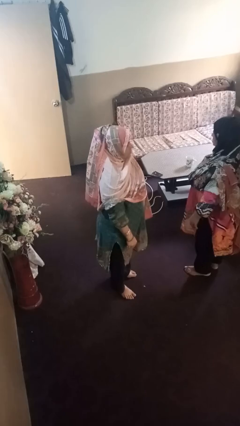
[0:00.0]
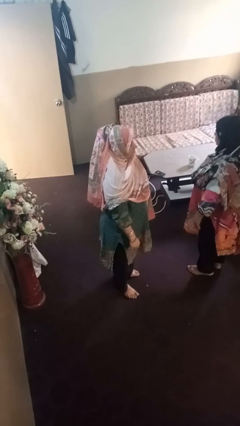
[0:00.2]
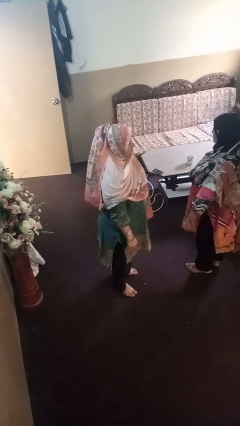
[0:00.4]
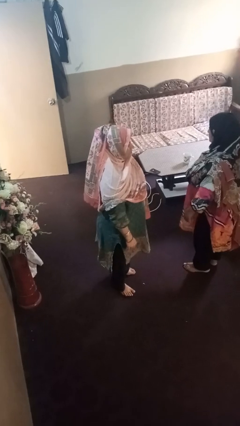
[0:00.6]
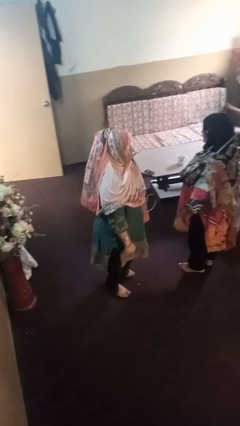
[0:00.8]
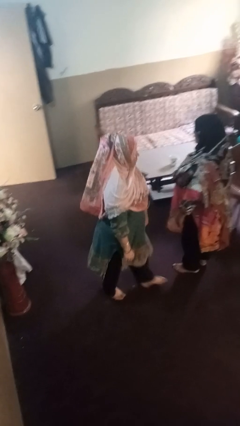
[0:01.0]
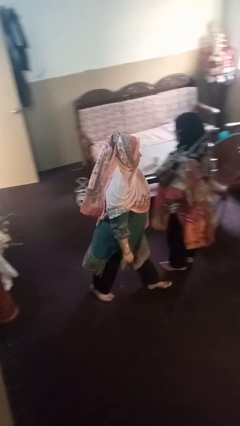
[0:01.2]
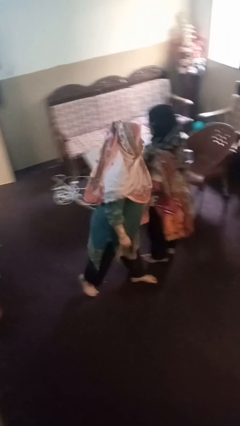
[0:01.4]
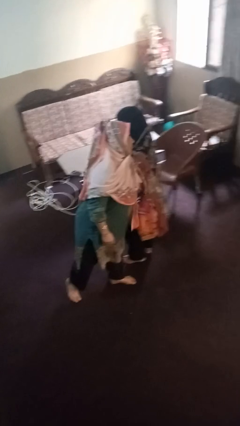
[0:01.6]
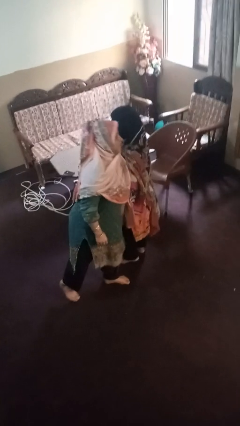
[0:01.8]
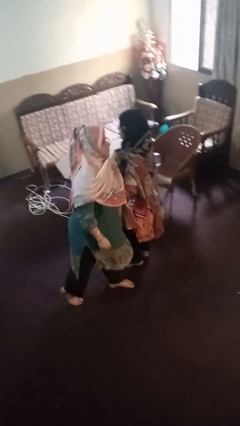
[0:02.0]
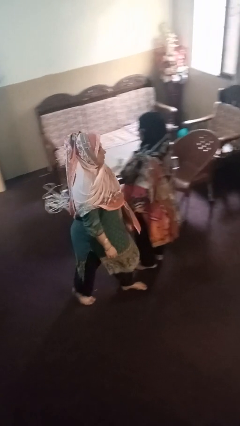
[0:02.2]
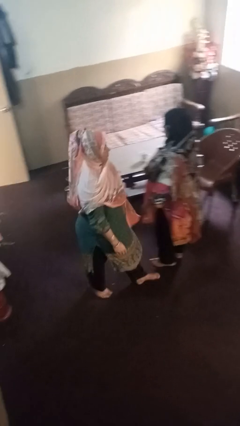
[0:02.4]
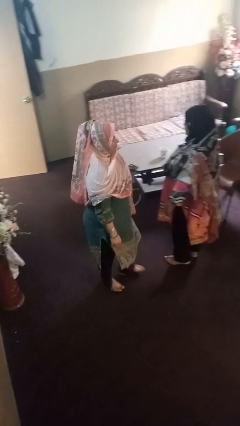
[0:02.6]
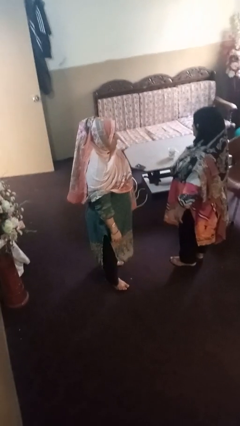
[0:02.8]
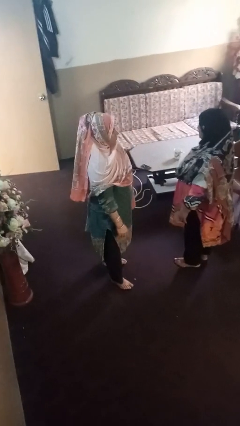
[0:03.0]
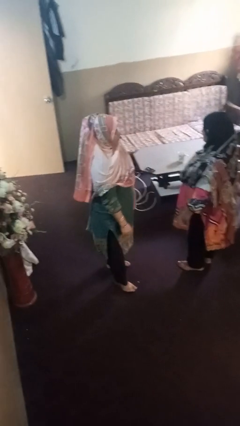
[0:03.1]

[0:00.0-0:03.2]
person shoves person

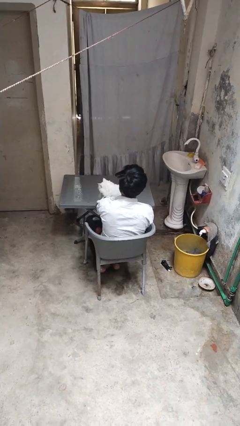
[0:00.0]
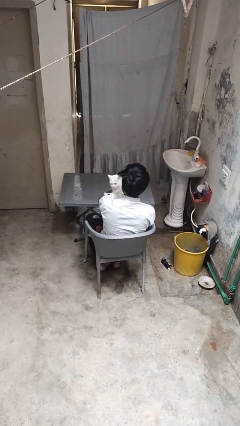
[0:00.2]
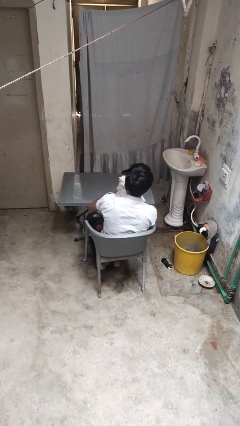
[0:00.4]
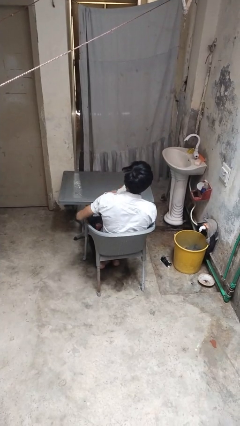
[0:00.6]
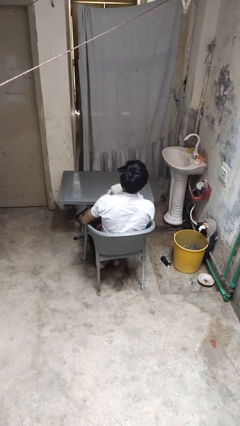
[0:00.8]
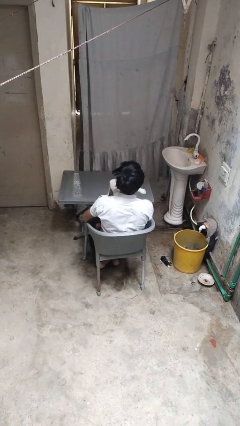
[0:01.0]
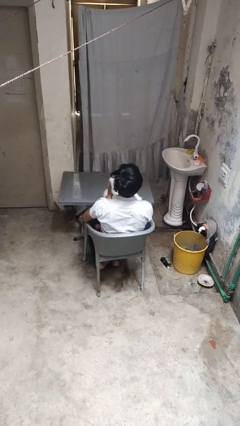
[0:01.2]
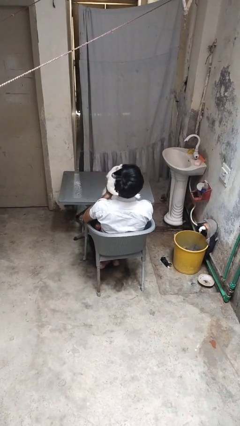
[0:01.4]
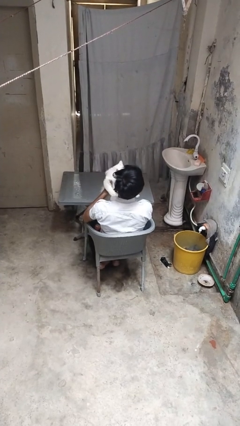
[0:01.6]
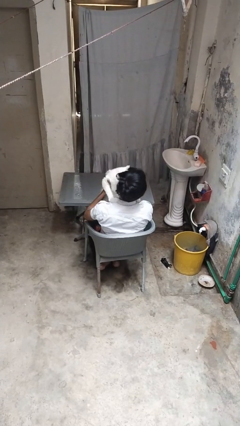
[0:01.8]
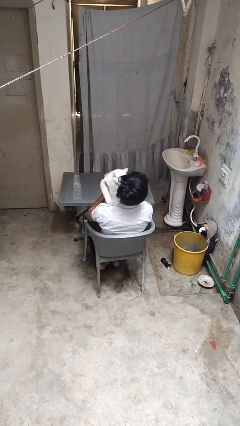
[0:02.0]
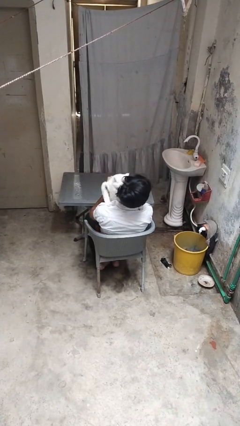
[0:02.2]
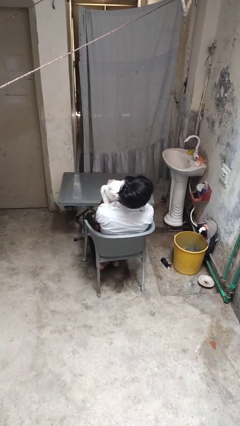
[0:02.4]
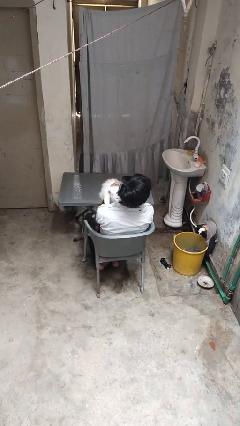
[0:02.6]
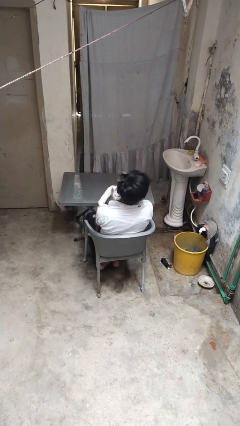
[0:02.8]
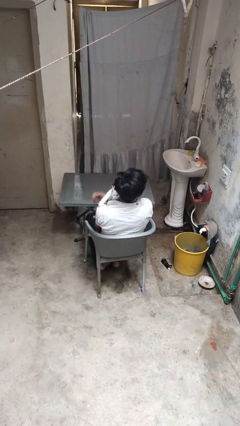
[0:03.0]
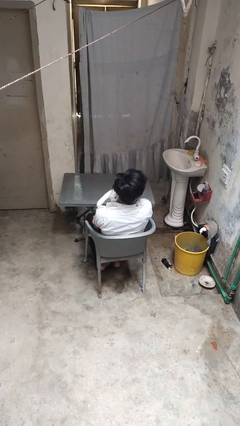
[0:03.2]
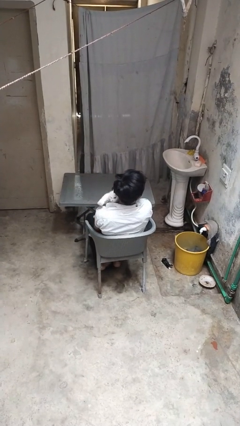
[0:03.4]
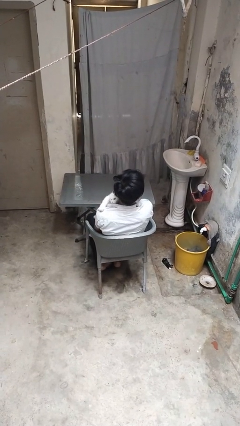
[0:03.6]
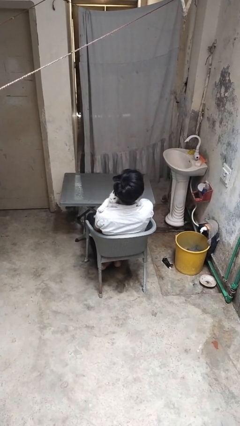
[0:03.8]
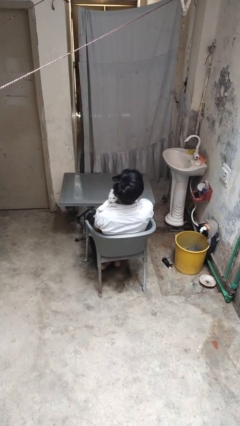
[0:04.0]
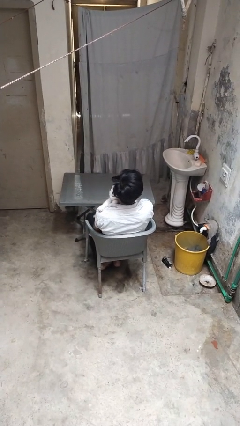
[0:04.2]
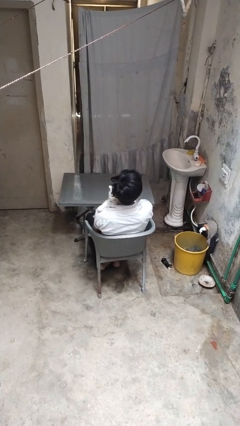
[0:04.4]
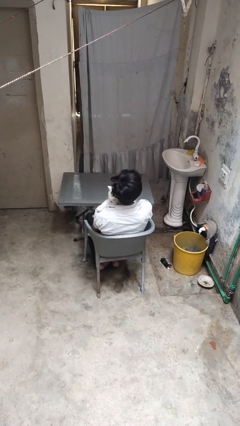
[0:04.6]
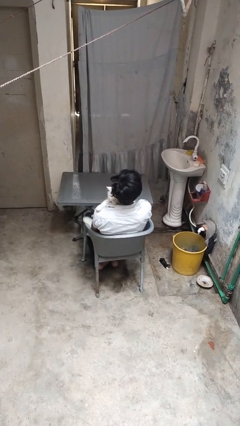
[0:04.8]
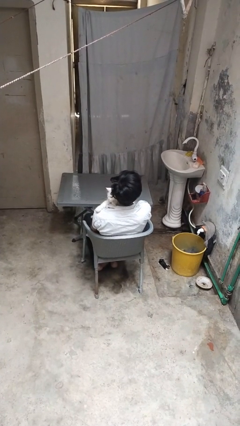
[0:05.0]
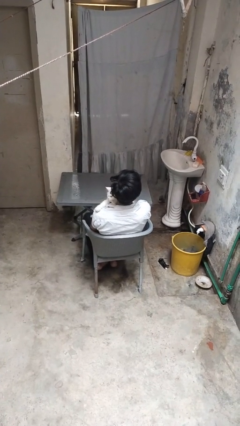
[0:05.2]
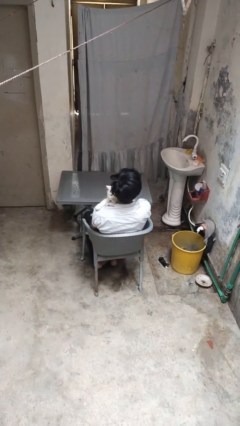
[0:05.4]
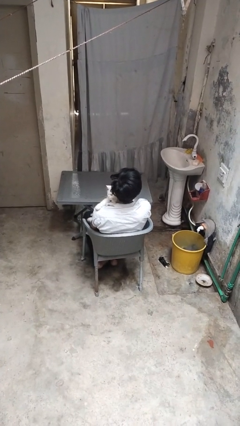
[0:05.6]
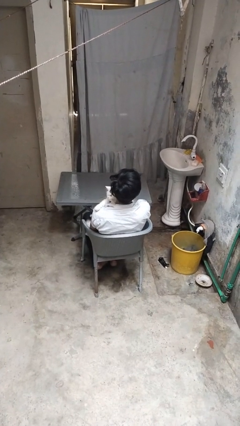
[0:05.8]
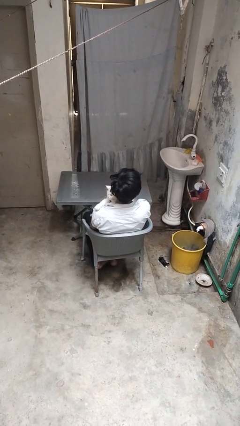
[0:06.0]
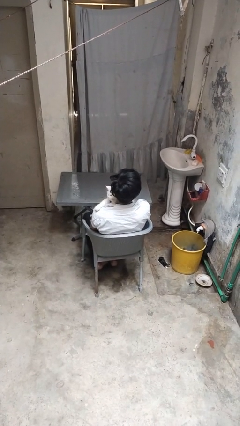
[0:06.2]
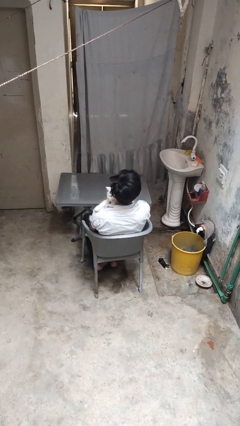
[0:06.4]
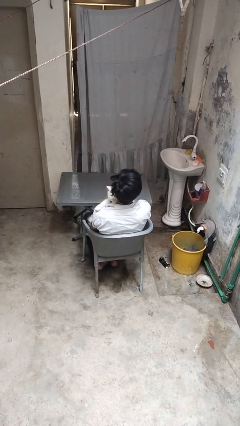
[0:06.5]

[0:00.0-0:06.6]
person hugs cat

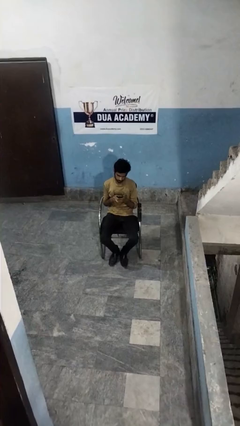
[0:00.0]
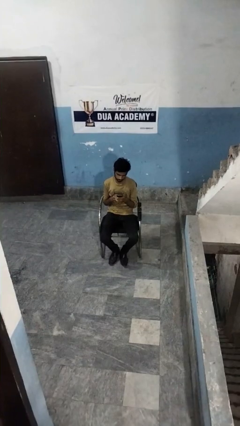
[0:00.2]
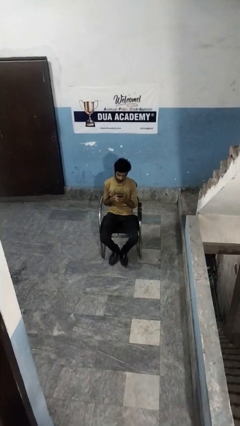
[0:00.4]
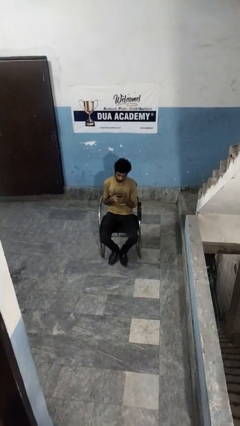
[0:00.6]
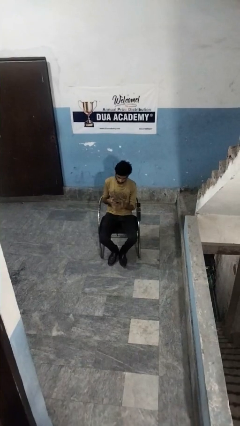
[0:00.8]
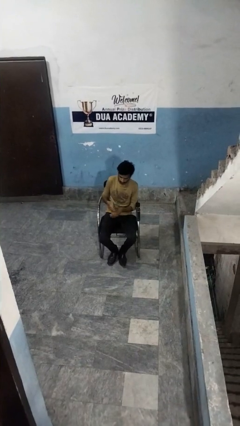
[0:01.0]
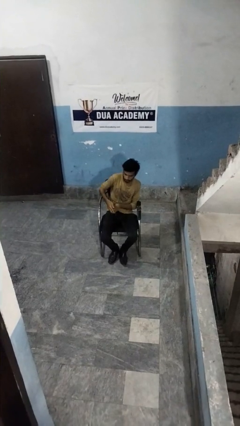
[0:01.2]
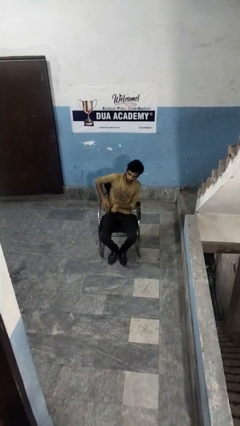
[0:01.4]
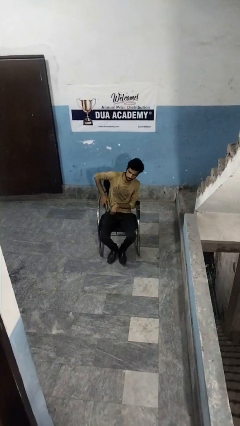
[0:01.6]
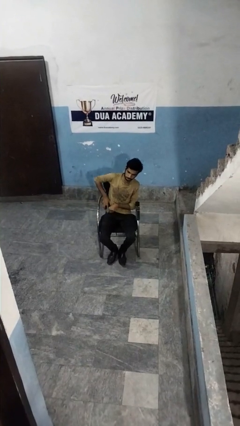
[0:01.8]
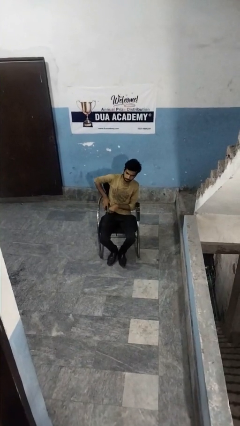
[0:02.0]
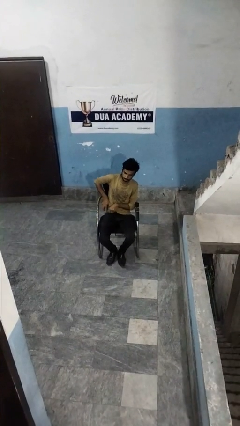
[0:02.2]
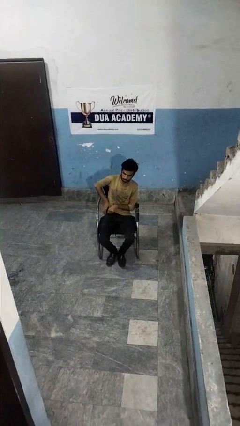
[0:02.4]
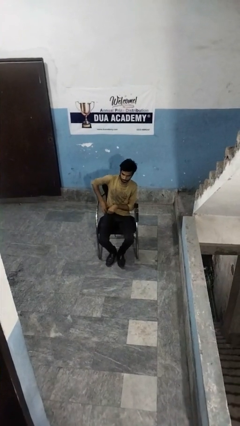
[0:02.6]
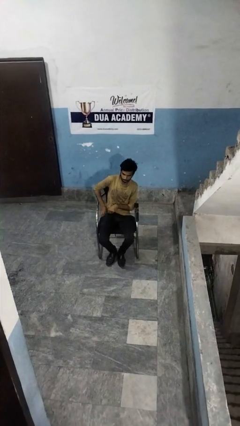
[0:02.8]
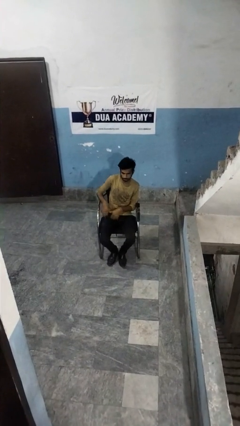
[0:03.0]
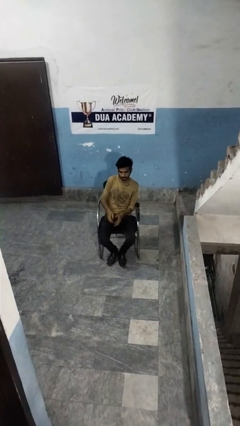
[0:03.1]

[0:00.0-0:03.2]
person puts phone into pocket

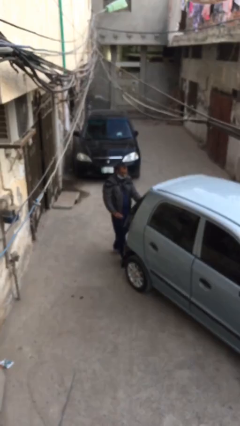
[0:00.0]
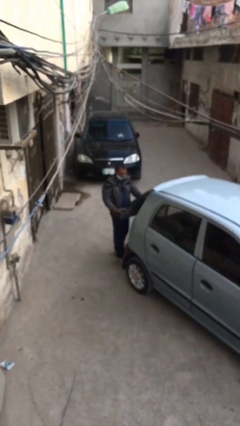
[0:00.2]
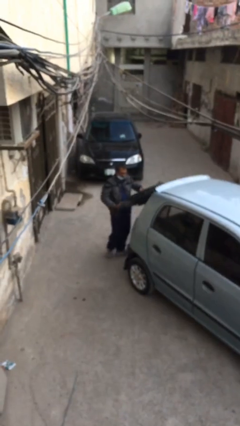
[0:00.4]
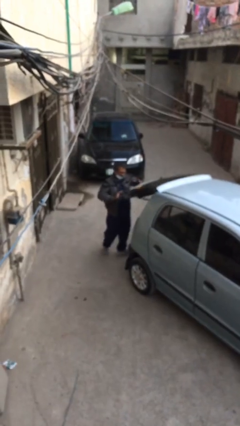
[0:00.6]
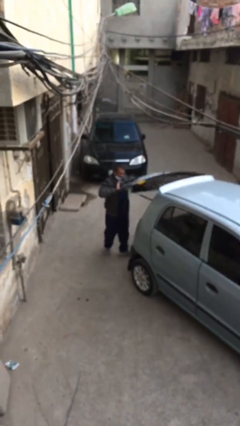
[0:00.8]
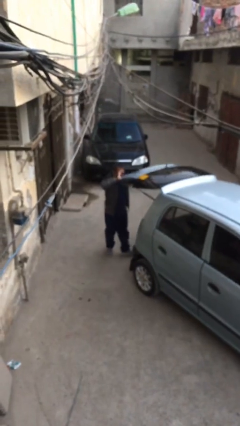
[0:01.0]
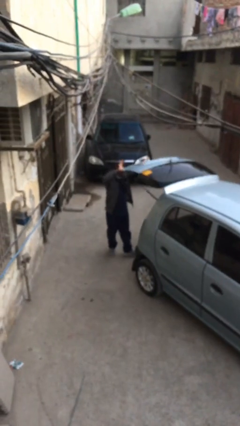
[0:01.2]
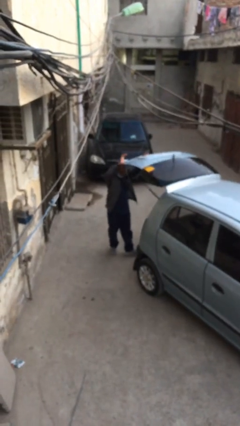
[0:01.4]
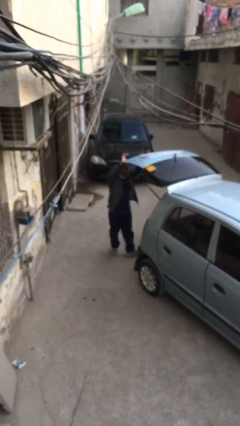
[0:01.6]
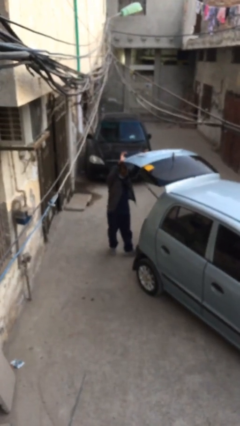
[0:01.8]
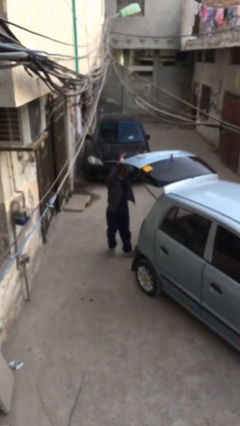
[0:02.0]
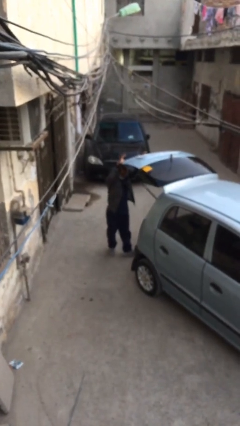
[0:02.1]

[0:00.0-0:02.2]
person opens car trunk

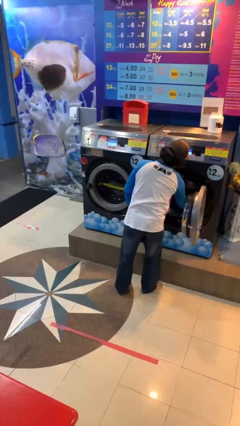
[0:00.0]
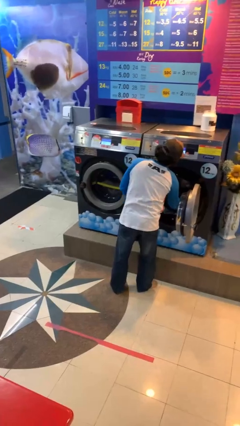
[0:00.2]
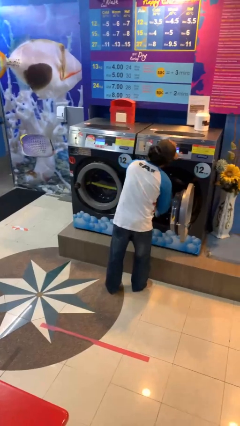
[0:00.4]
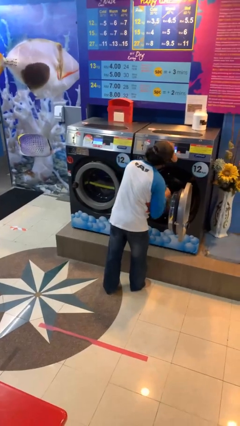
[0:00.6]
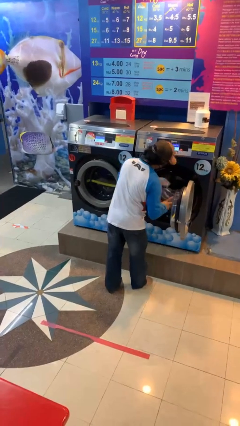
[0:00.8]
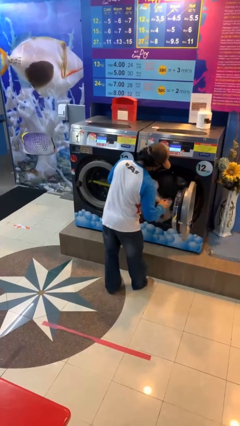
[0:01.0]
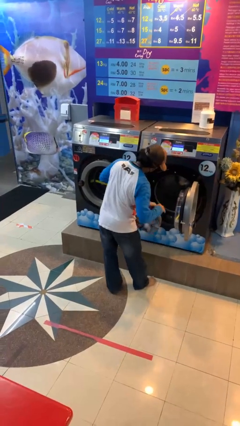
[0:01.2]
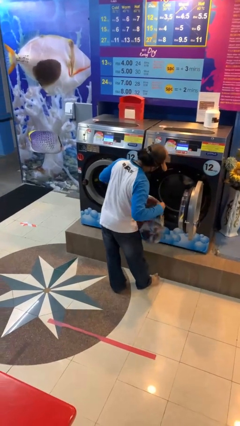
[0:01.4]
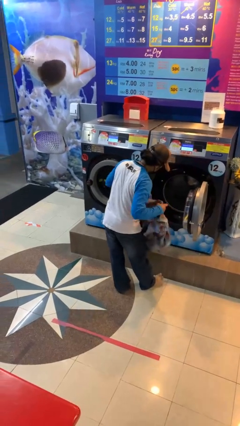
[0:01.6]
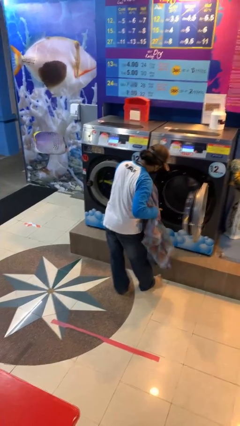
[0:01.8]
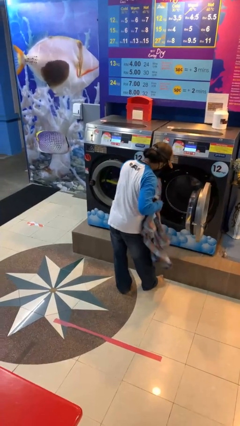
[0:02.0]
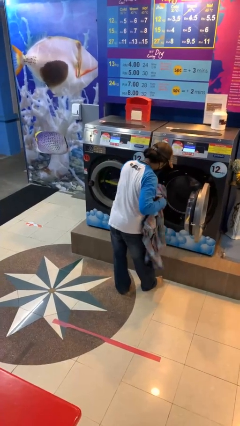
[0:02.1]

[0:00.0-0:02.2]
person unloads clotheswasher

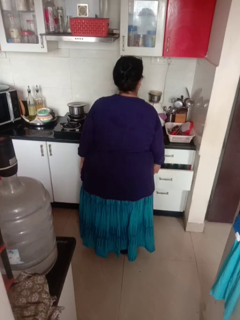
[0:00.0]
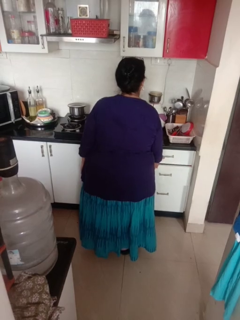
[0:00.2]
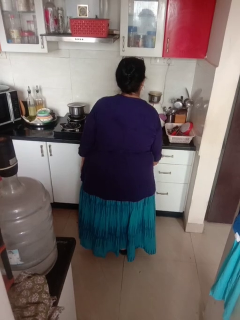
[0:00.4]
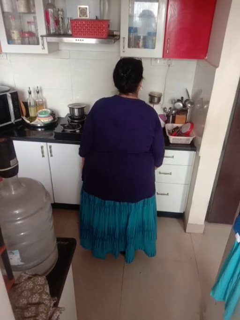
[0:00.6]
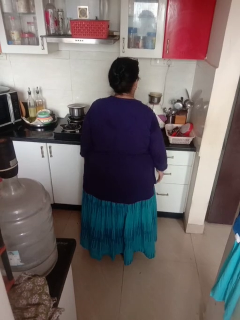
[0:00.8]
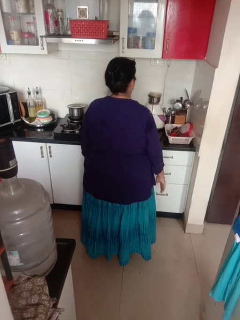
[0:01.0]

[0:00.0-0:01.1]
person closes kitchen drawer
